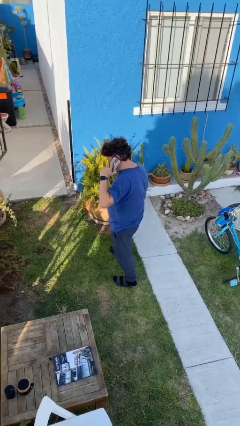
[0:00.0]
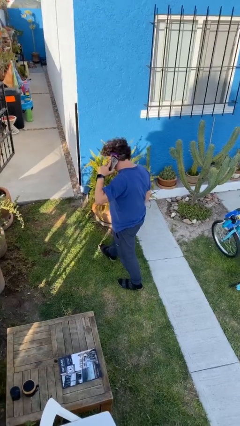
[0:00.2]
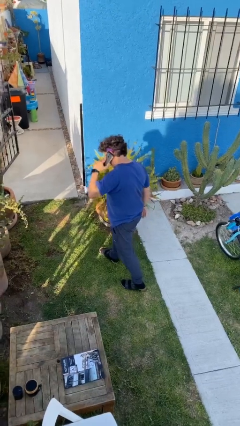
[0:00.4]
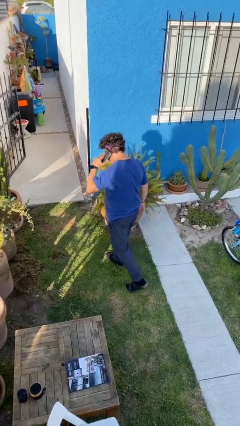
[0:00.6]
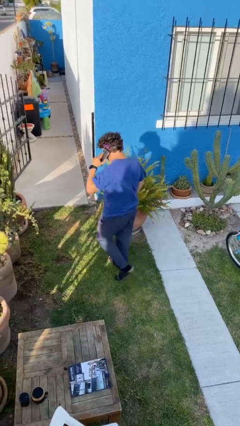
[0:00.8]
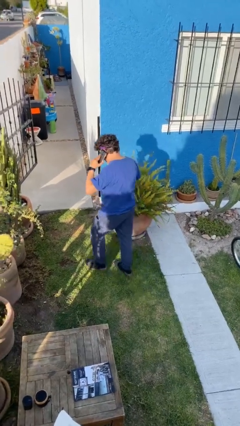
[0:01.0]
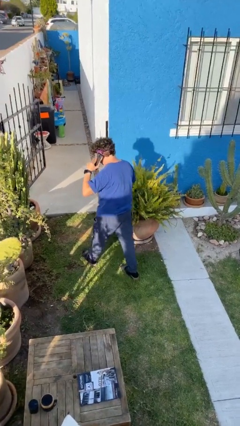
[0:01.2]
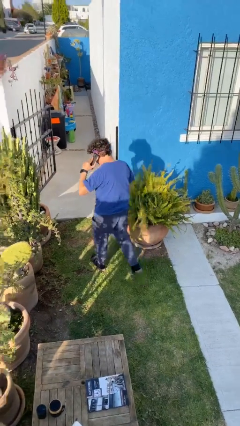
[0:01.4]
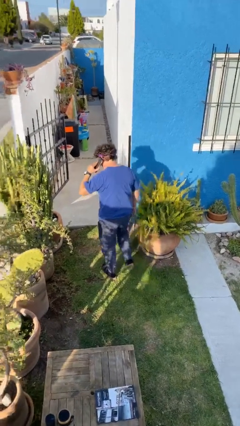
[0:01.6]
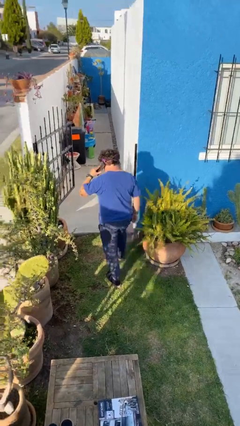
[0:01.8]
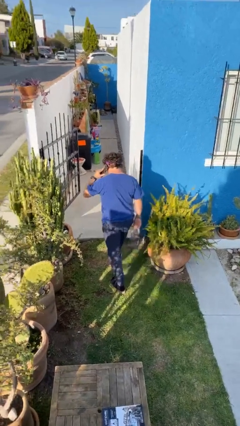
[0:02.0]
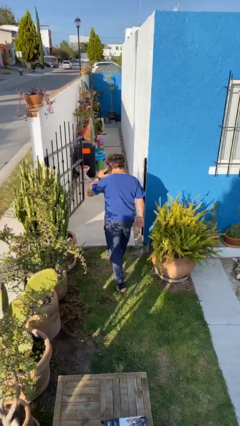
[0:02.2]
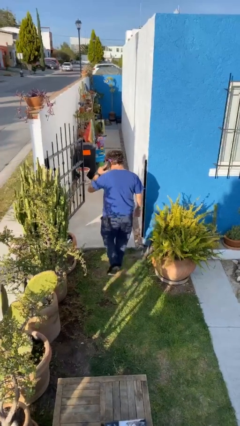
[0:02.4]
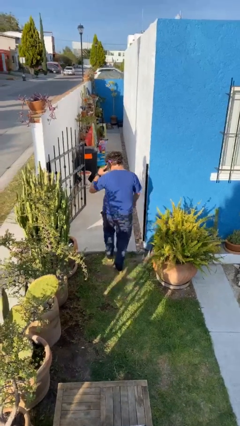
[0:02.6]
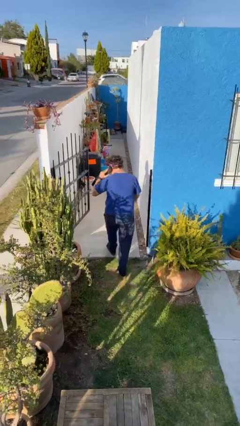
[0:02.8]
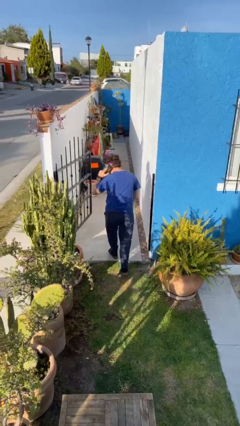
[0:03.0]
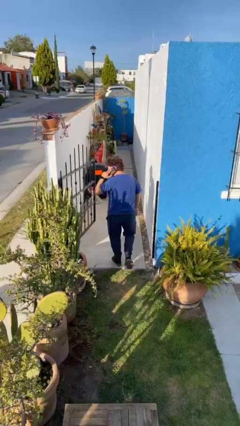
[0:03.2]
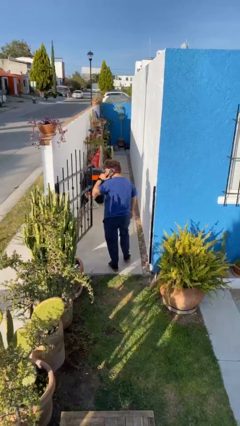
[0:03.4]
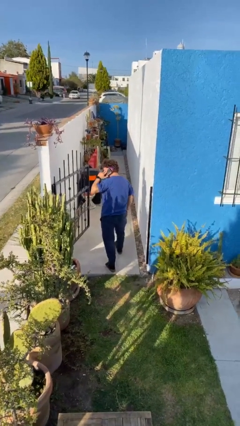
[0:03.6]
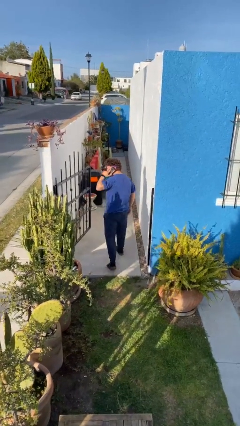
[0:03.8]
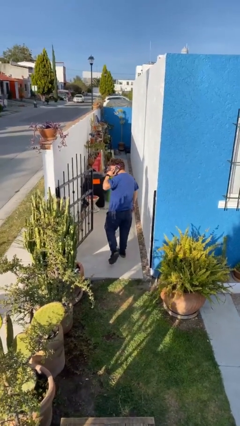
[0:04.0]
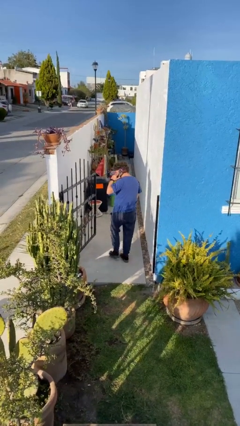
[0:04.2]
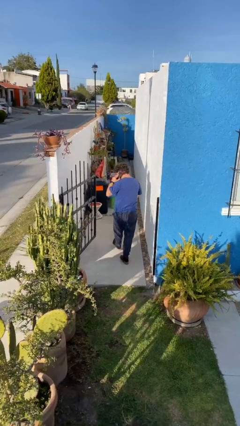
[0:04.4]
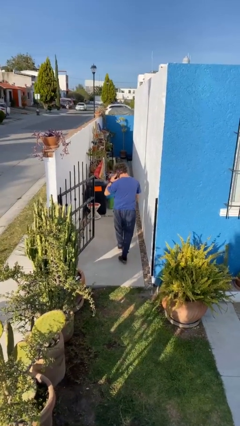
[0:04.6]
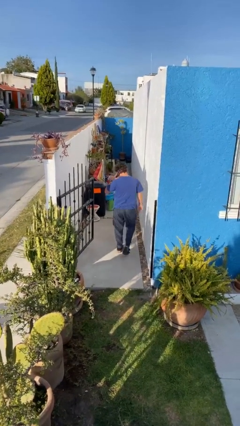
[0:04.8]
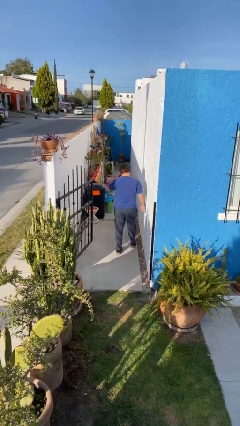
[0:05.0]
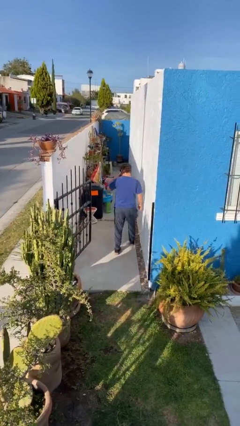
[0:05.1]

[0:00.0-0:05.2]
person exits scene through structure

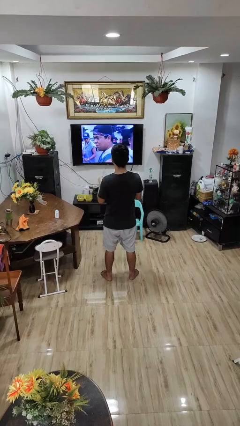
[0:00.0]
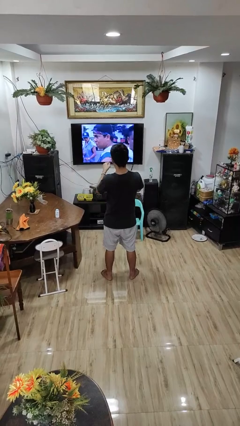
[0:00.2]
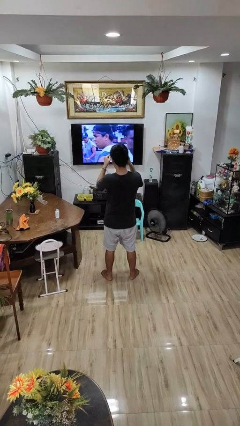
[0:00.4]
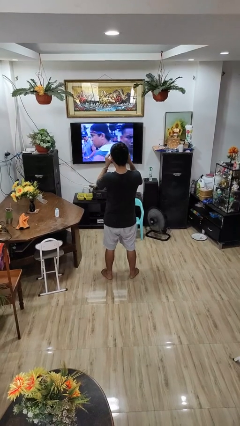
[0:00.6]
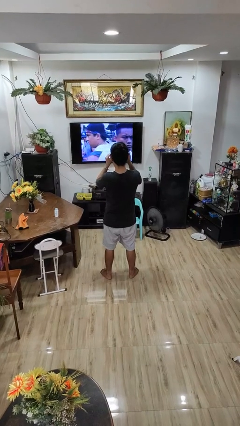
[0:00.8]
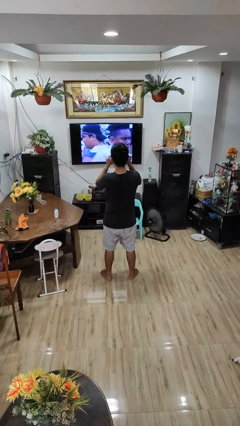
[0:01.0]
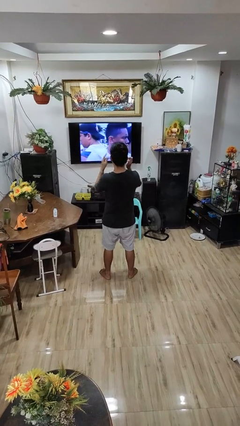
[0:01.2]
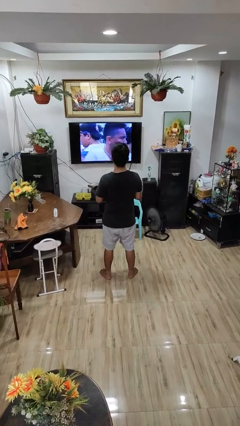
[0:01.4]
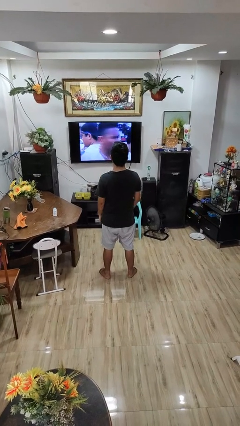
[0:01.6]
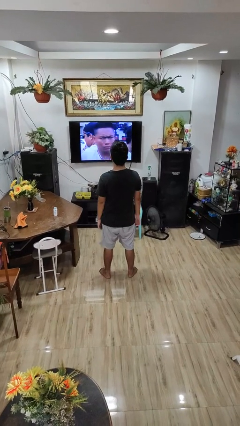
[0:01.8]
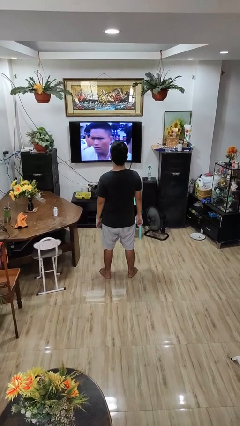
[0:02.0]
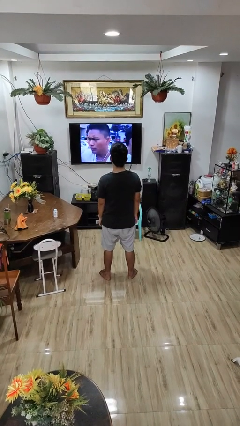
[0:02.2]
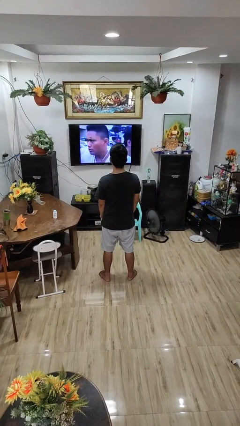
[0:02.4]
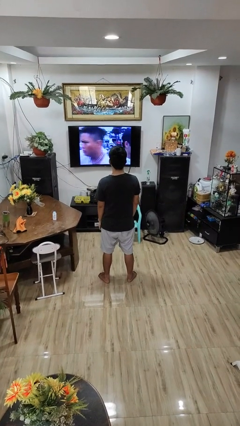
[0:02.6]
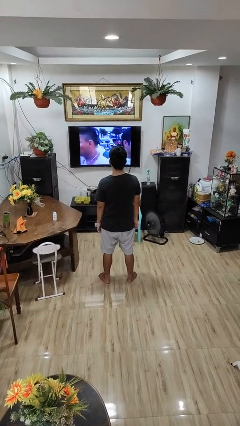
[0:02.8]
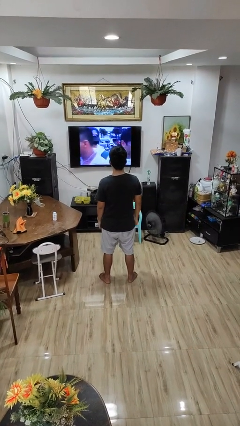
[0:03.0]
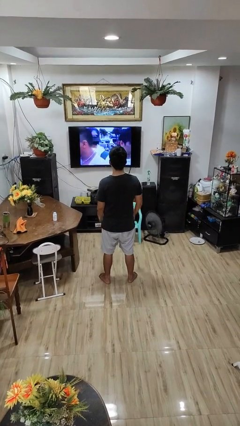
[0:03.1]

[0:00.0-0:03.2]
person puts on glasses

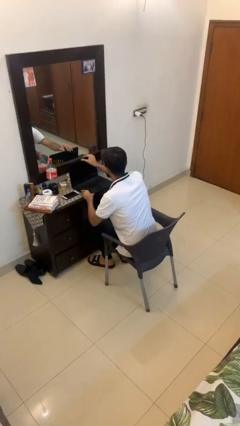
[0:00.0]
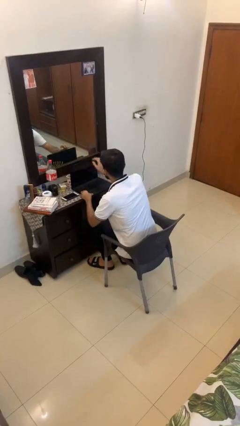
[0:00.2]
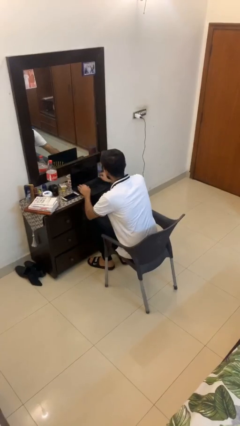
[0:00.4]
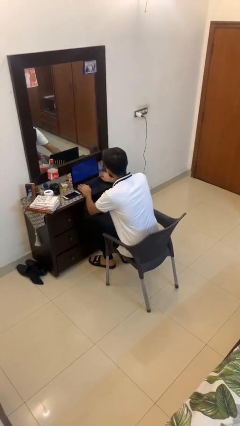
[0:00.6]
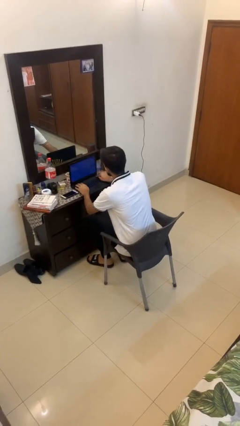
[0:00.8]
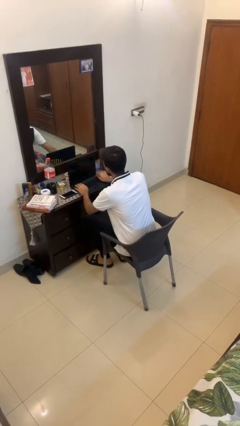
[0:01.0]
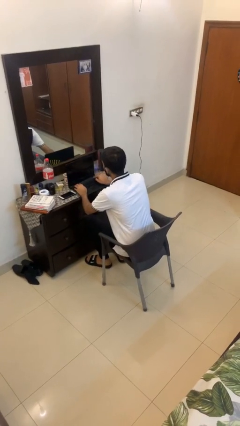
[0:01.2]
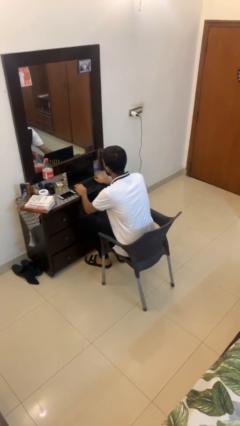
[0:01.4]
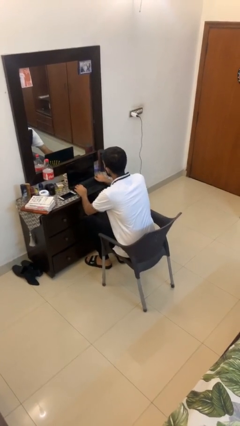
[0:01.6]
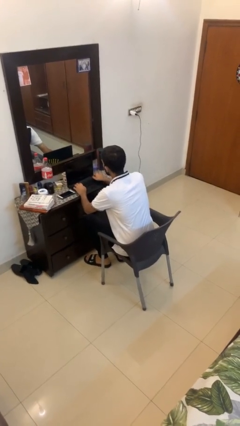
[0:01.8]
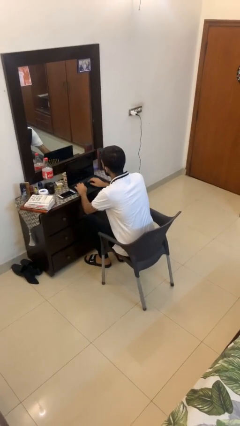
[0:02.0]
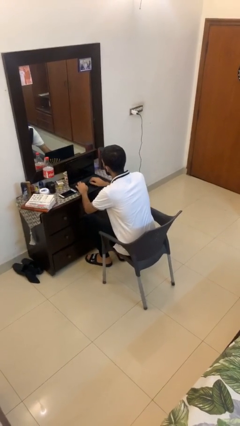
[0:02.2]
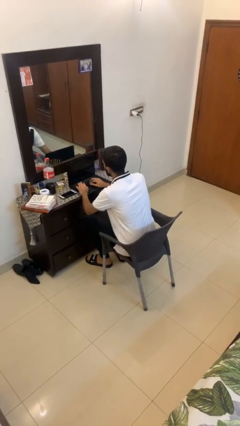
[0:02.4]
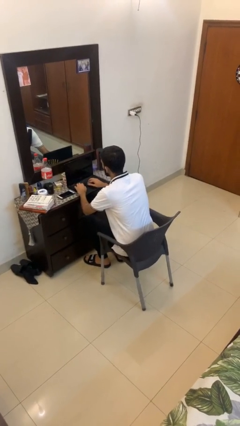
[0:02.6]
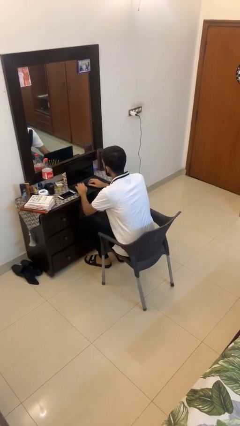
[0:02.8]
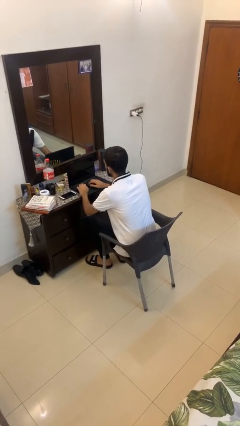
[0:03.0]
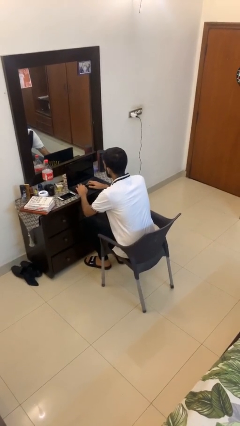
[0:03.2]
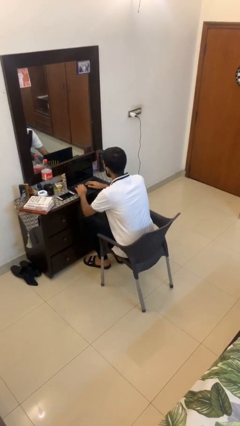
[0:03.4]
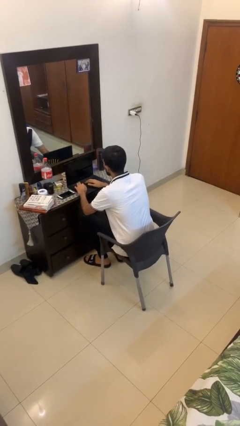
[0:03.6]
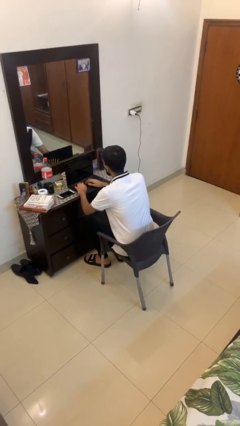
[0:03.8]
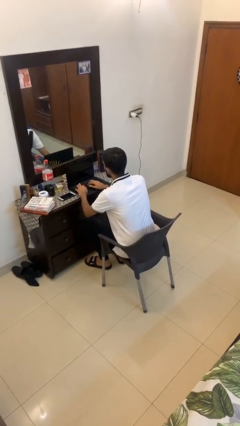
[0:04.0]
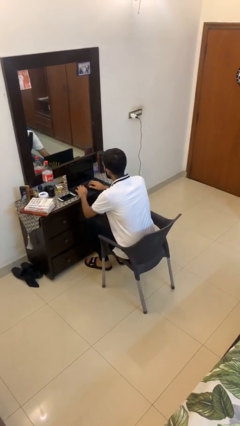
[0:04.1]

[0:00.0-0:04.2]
person interacts with laptop

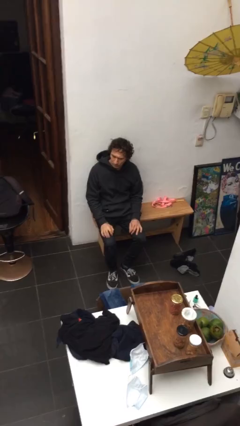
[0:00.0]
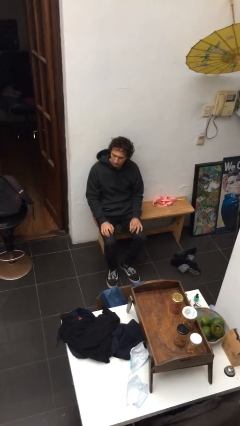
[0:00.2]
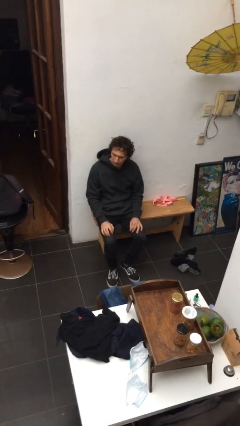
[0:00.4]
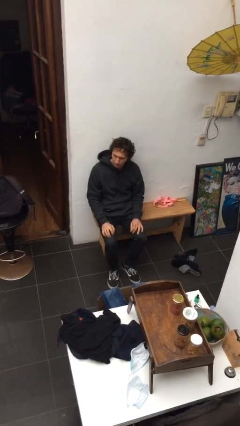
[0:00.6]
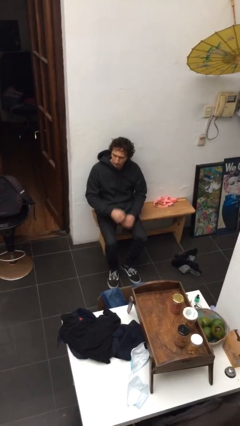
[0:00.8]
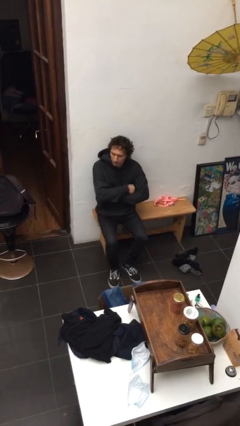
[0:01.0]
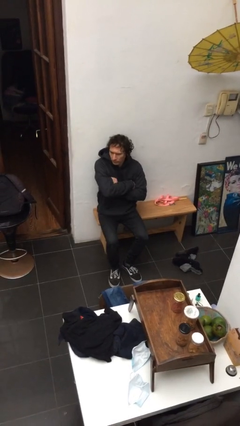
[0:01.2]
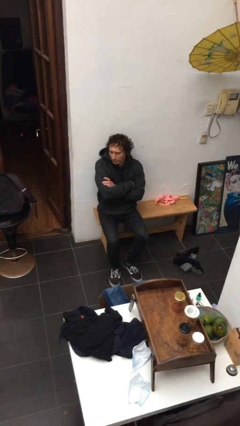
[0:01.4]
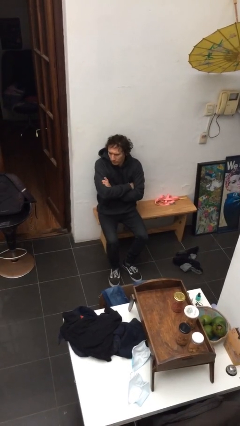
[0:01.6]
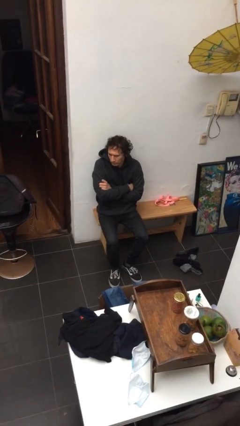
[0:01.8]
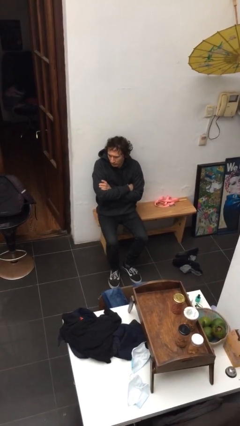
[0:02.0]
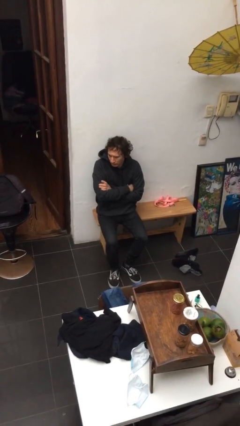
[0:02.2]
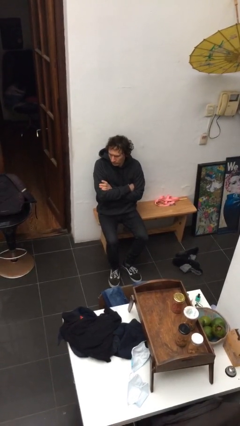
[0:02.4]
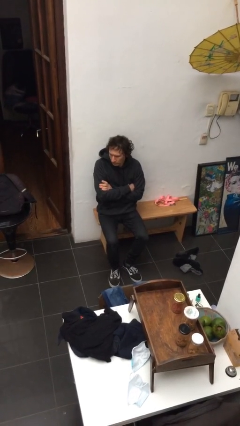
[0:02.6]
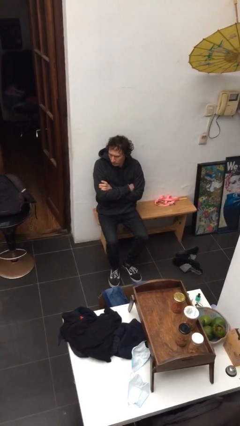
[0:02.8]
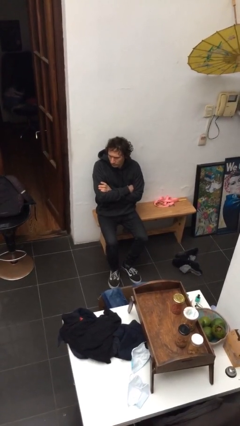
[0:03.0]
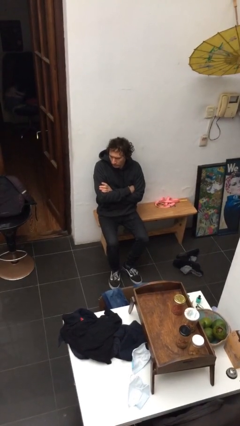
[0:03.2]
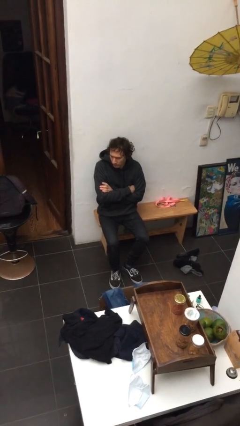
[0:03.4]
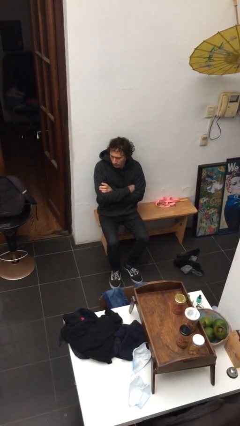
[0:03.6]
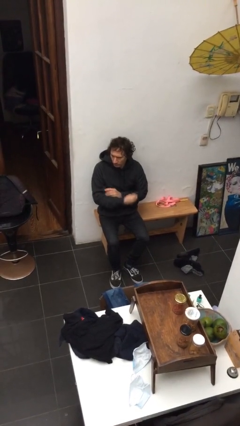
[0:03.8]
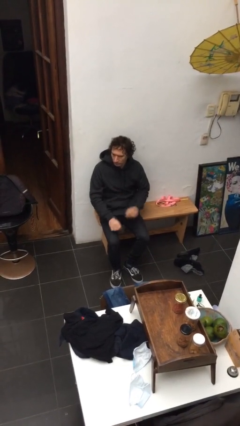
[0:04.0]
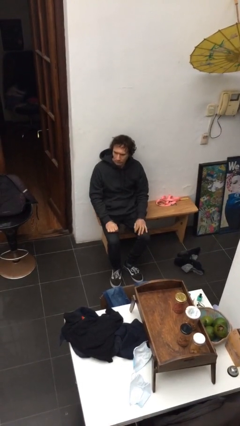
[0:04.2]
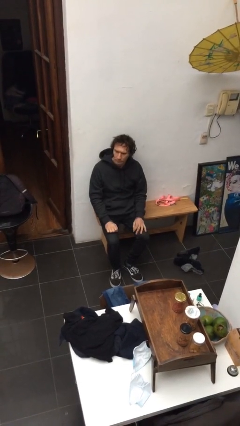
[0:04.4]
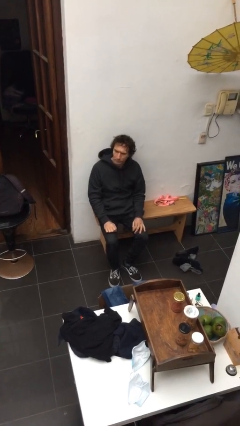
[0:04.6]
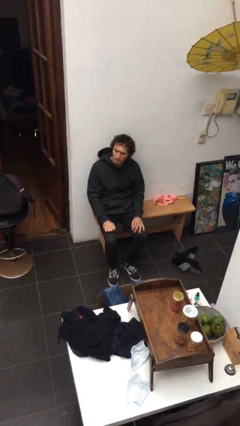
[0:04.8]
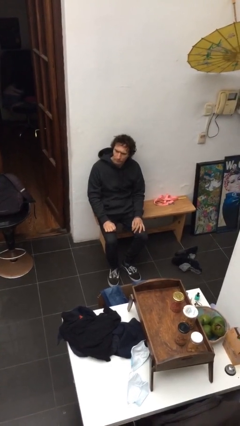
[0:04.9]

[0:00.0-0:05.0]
person crosses arms
